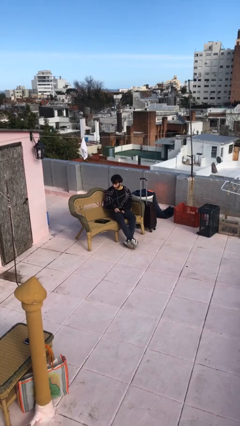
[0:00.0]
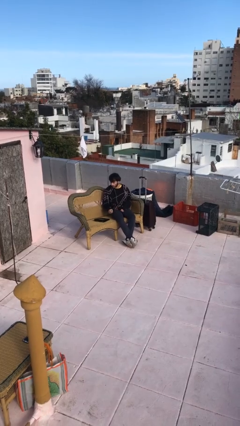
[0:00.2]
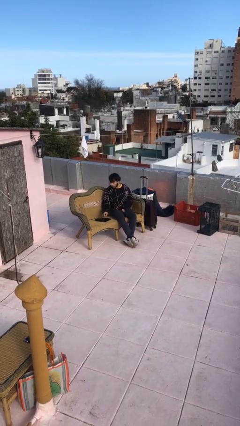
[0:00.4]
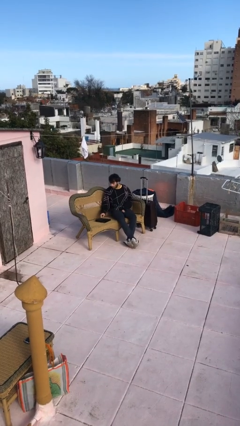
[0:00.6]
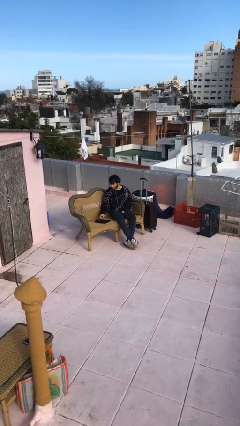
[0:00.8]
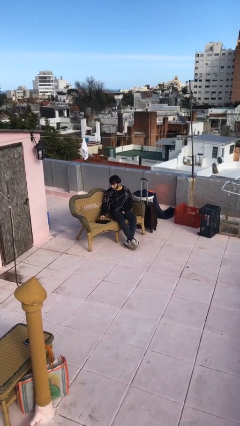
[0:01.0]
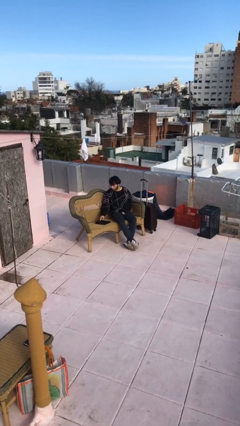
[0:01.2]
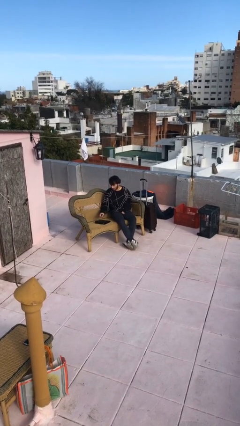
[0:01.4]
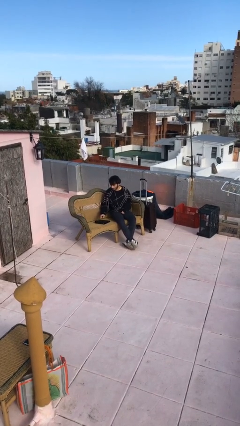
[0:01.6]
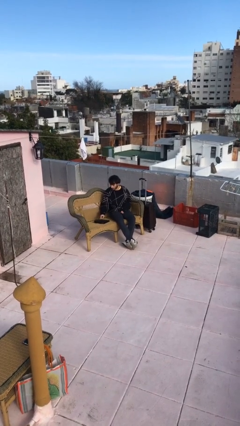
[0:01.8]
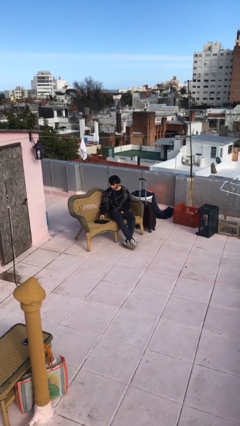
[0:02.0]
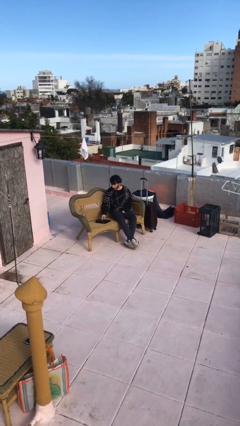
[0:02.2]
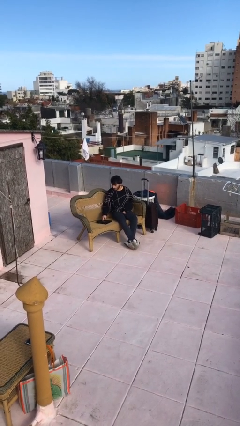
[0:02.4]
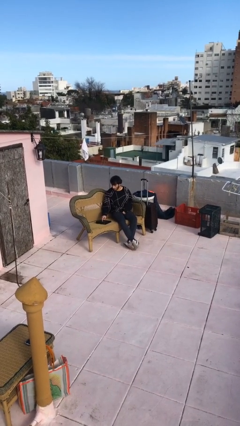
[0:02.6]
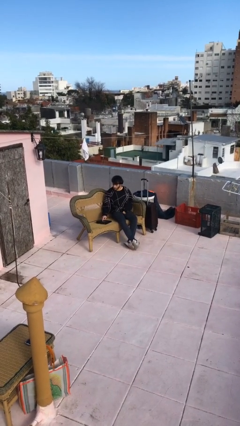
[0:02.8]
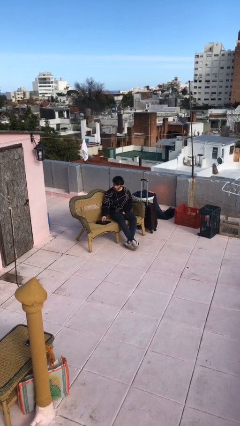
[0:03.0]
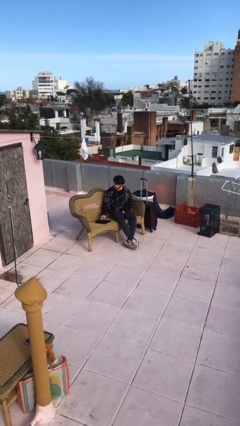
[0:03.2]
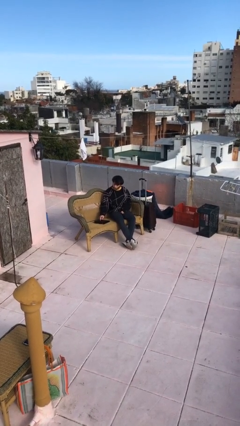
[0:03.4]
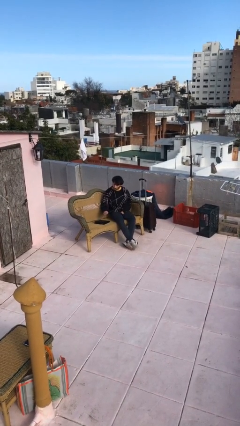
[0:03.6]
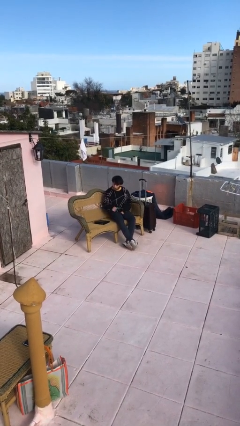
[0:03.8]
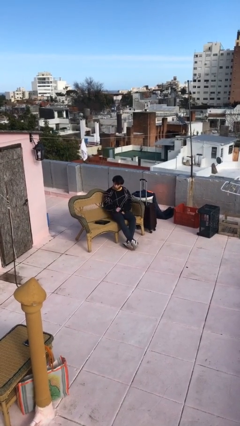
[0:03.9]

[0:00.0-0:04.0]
person taps object with finger

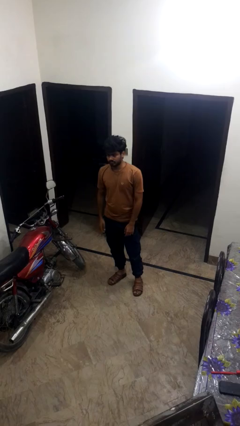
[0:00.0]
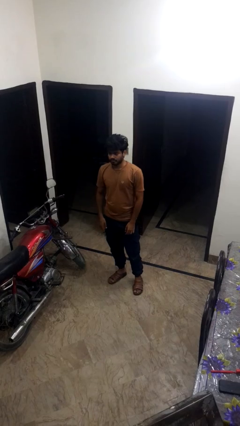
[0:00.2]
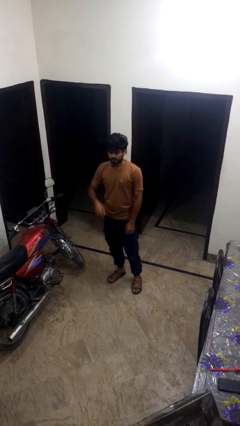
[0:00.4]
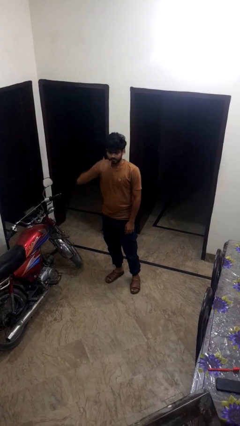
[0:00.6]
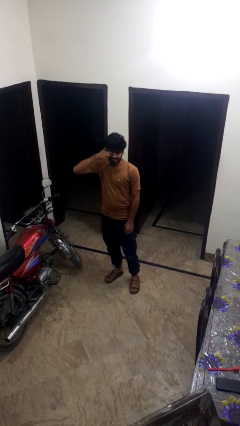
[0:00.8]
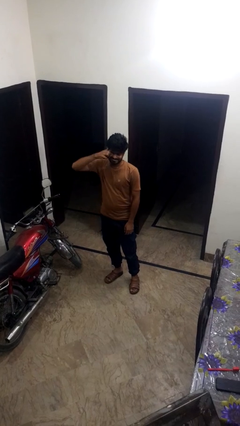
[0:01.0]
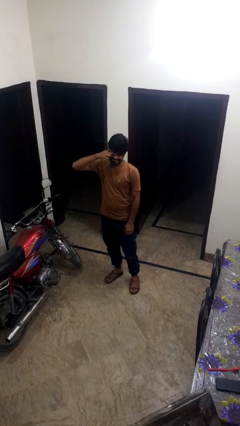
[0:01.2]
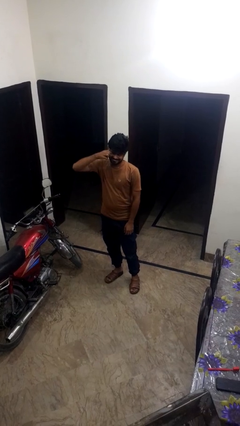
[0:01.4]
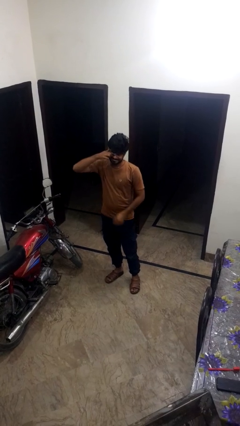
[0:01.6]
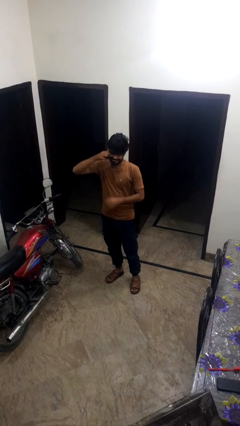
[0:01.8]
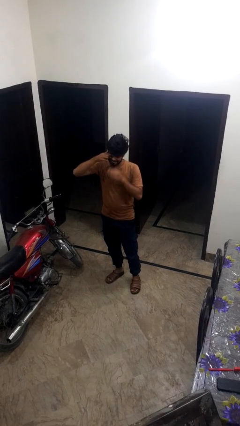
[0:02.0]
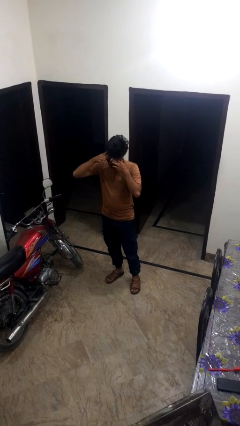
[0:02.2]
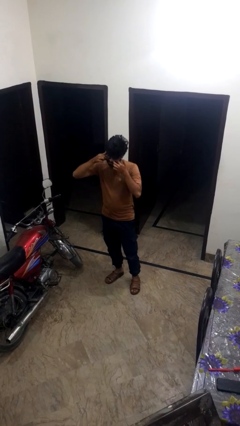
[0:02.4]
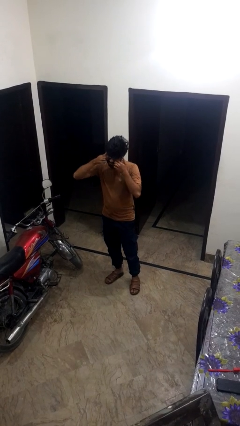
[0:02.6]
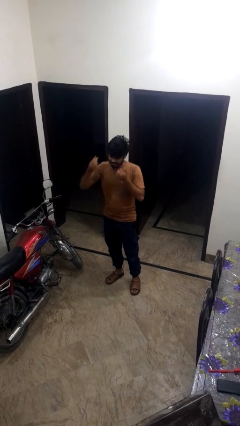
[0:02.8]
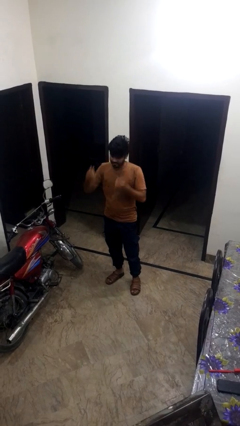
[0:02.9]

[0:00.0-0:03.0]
person rubs eyes

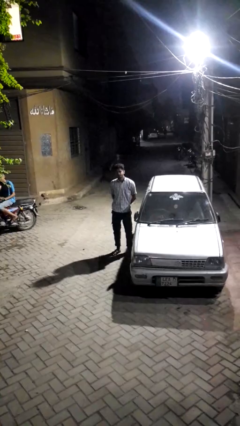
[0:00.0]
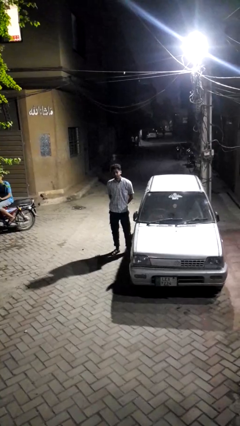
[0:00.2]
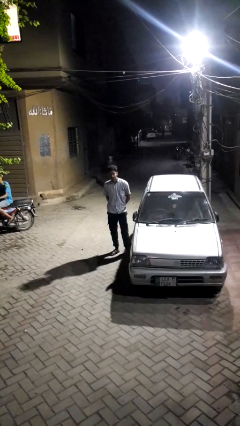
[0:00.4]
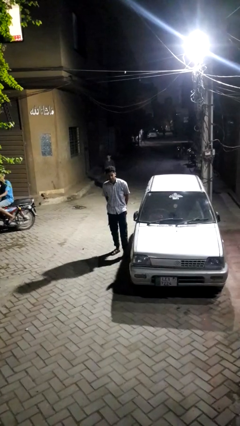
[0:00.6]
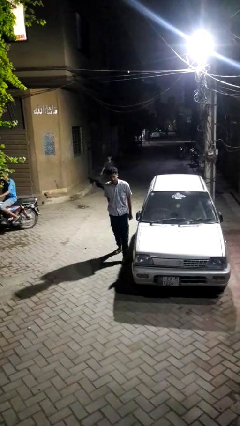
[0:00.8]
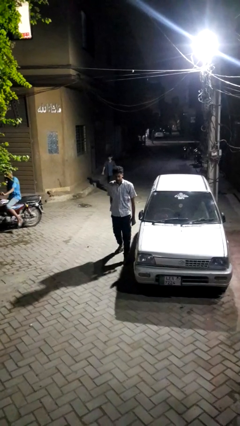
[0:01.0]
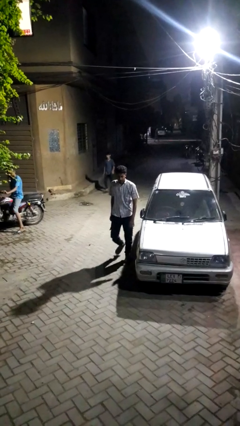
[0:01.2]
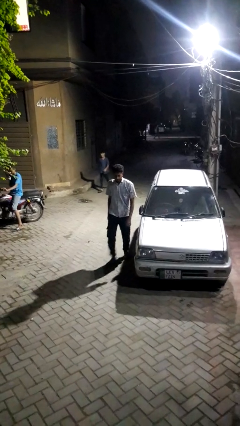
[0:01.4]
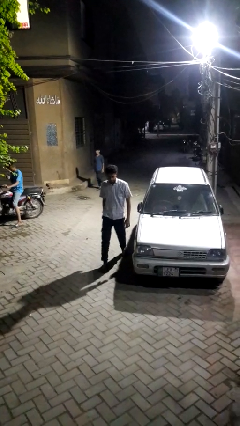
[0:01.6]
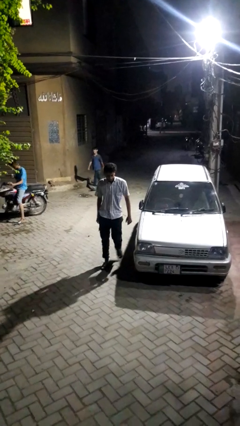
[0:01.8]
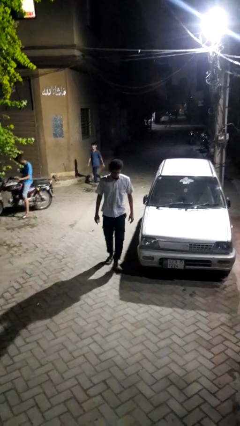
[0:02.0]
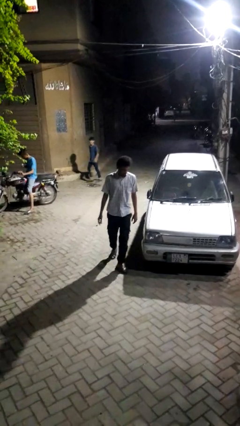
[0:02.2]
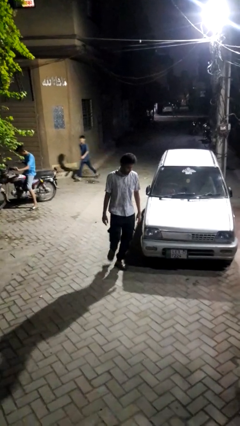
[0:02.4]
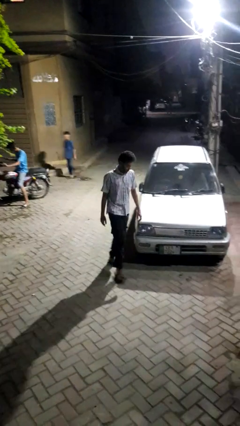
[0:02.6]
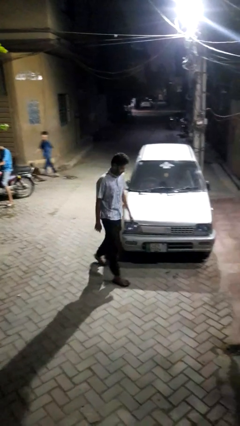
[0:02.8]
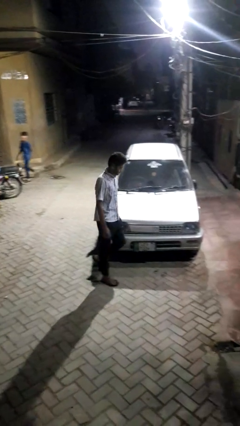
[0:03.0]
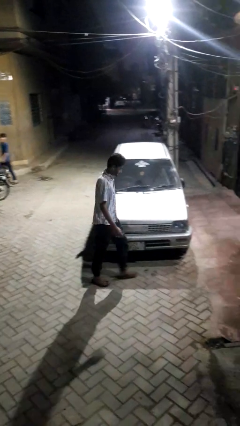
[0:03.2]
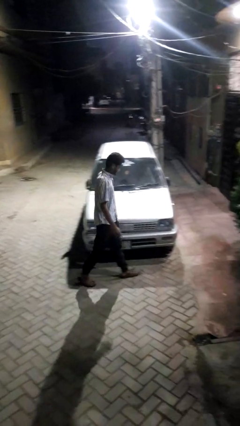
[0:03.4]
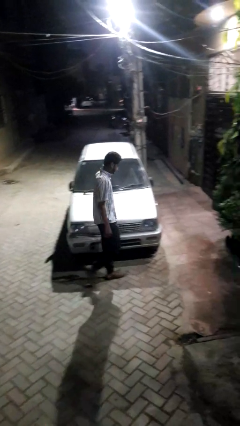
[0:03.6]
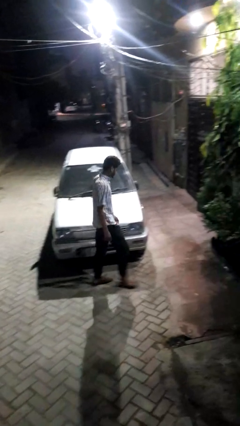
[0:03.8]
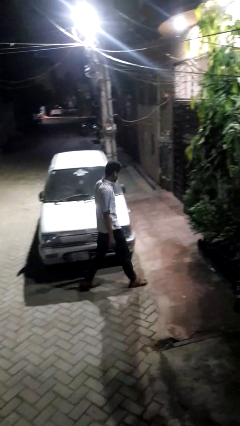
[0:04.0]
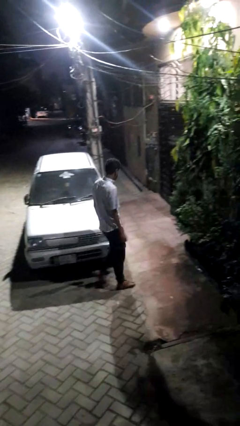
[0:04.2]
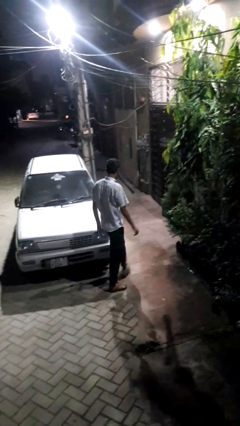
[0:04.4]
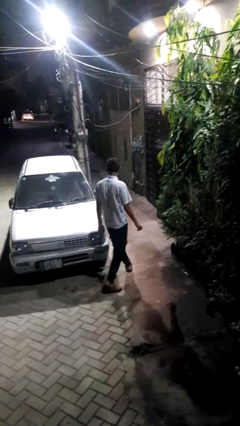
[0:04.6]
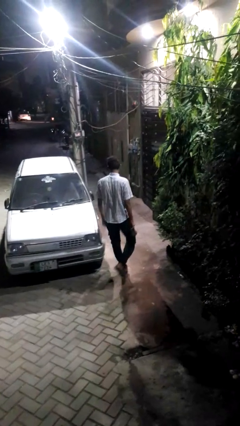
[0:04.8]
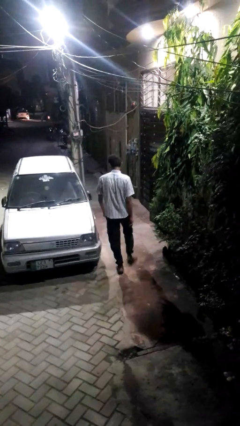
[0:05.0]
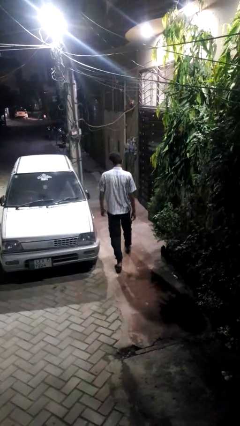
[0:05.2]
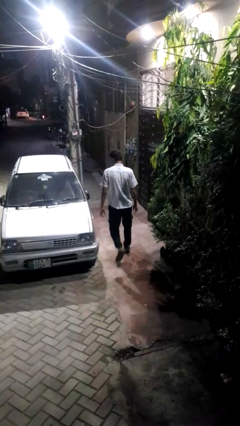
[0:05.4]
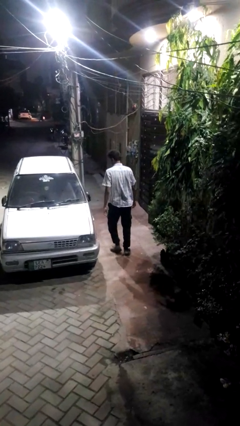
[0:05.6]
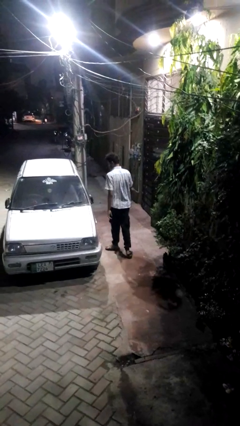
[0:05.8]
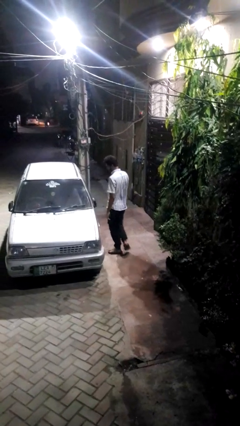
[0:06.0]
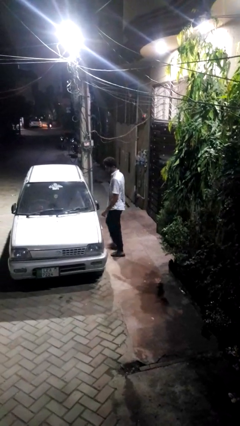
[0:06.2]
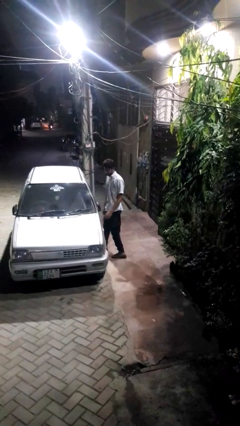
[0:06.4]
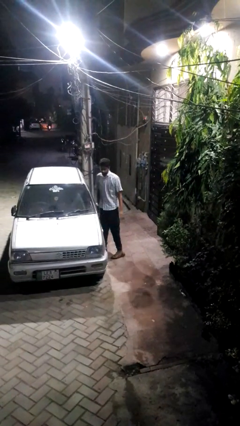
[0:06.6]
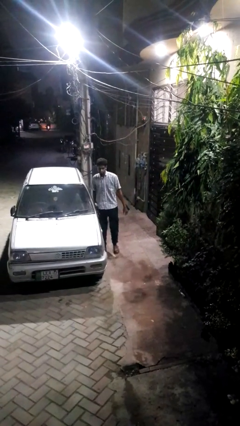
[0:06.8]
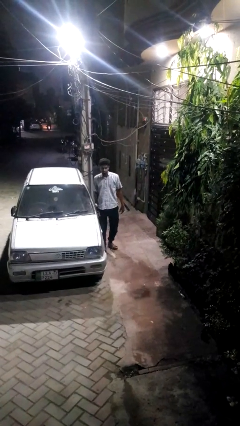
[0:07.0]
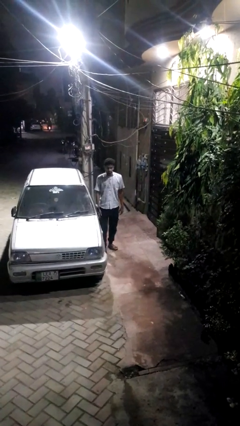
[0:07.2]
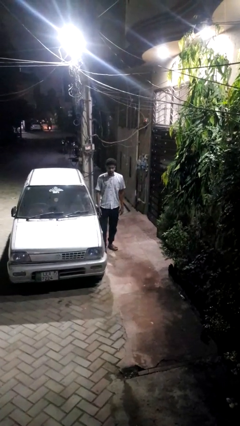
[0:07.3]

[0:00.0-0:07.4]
person walks around car

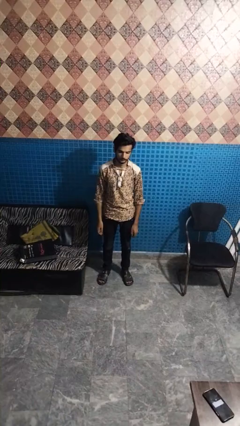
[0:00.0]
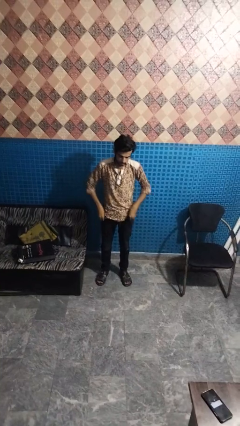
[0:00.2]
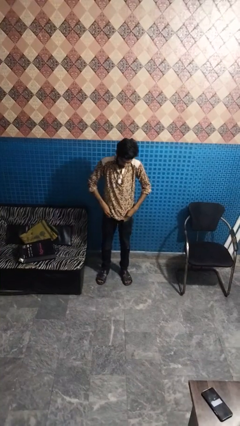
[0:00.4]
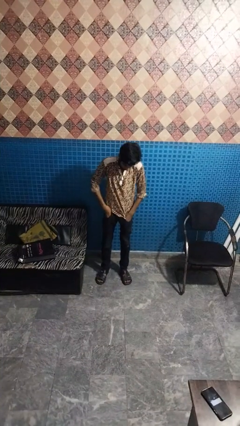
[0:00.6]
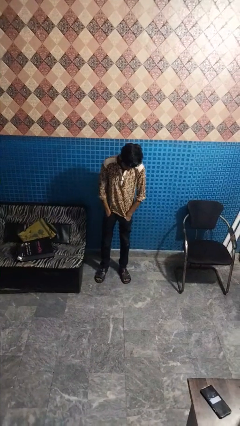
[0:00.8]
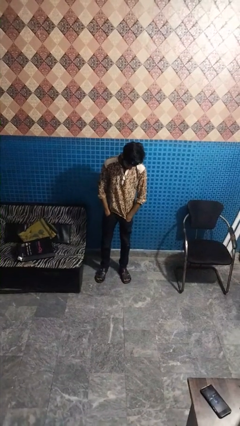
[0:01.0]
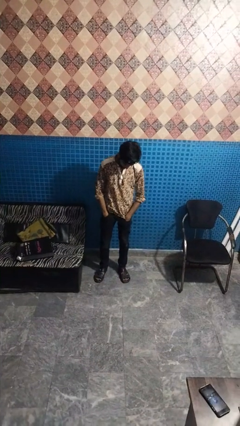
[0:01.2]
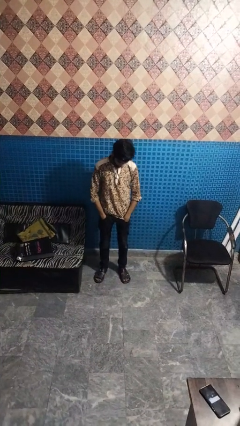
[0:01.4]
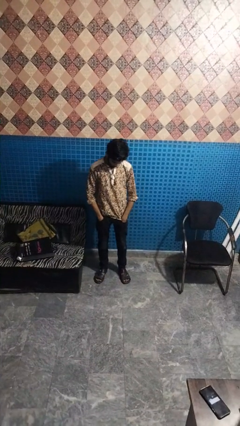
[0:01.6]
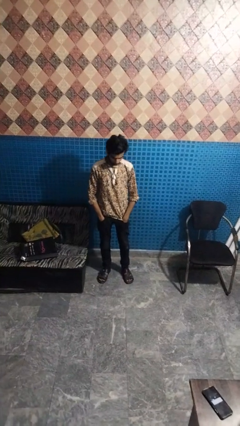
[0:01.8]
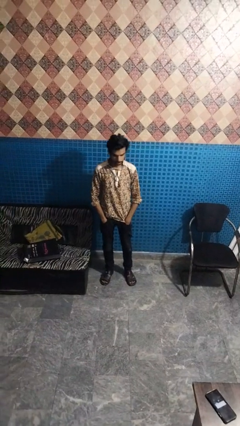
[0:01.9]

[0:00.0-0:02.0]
person puts hands in back pockets

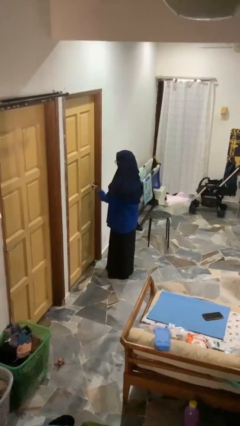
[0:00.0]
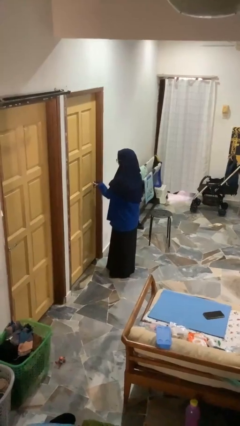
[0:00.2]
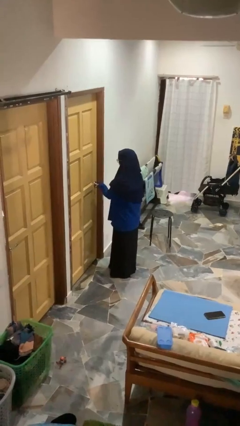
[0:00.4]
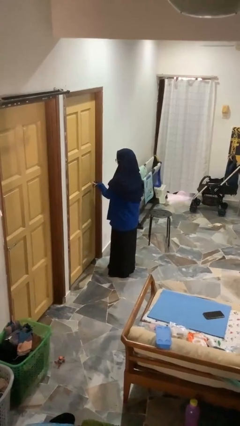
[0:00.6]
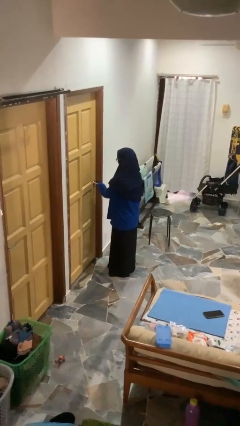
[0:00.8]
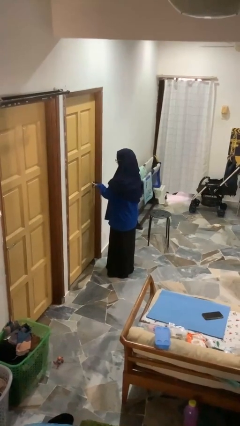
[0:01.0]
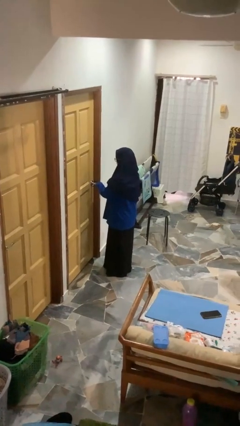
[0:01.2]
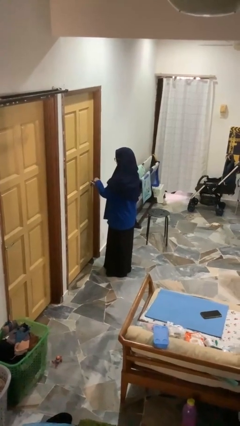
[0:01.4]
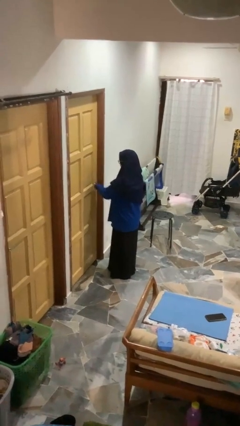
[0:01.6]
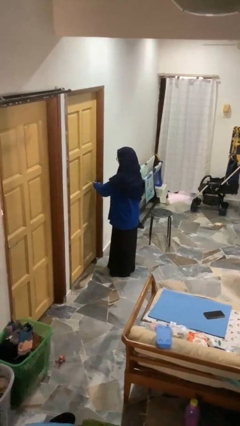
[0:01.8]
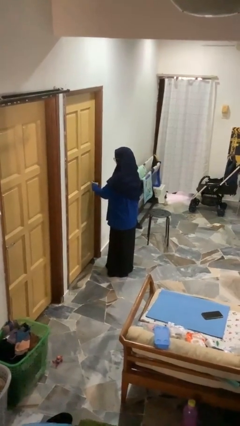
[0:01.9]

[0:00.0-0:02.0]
person unlocks door with keys
